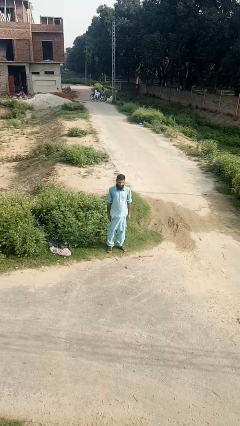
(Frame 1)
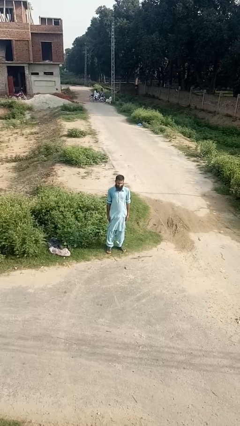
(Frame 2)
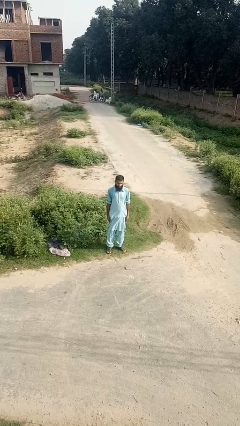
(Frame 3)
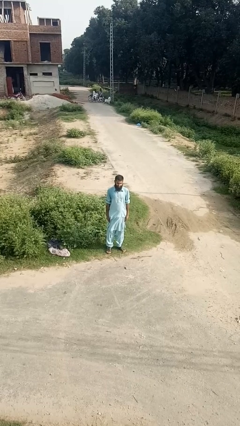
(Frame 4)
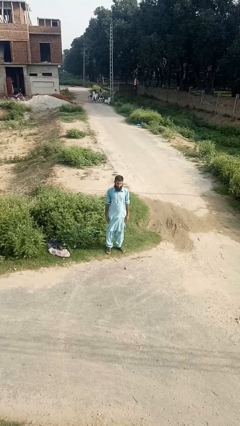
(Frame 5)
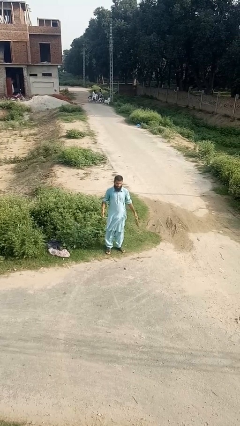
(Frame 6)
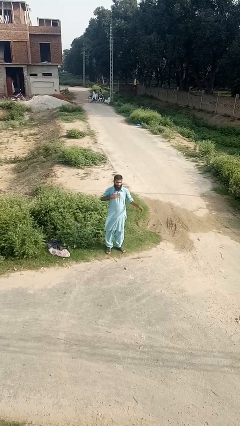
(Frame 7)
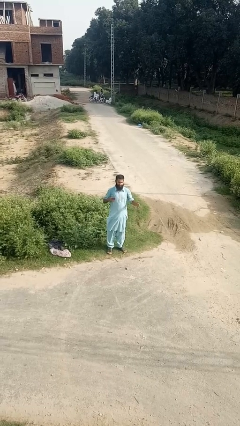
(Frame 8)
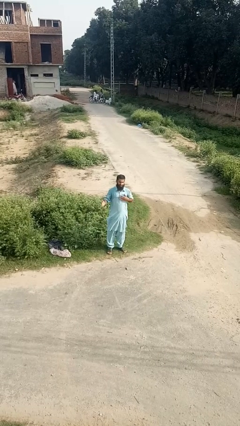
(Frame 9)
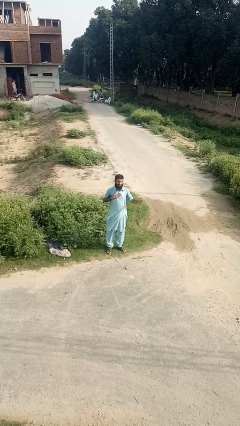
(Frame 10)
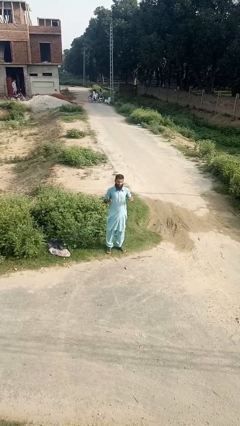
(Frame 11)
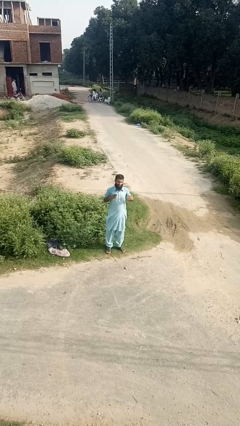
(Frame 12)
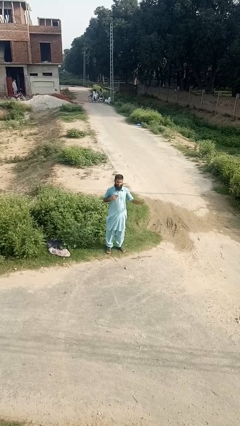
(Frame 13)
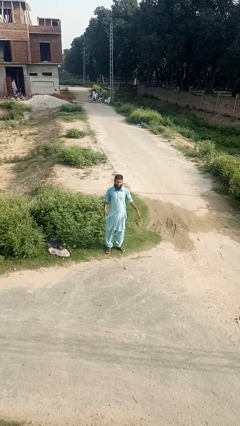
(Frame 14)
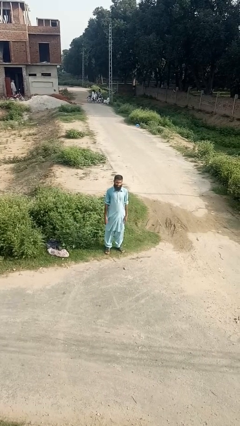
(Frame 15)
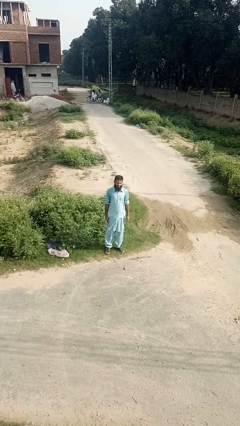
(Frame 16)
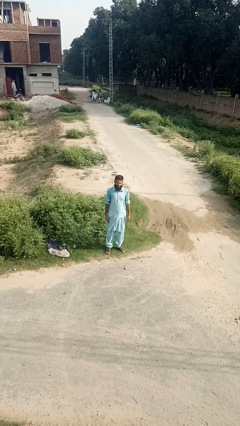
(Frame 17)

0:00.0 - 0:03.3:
person drums on chest

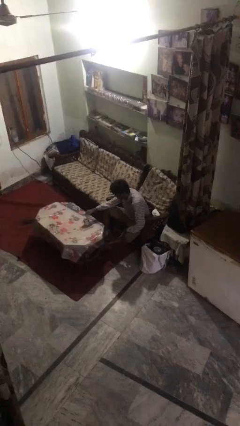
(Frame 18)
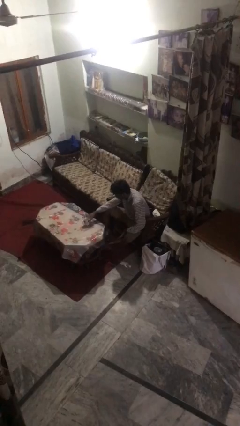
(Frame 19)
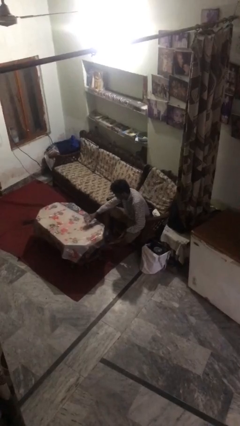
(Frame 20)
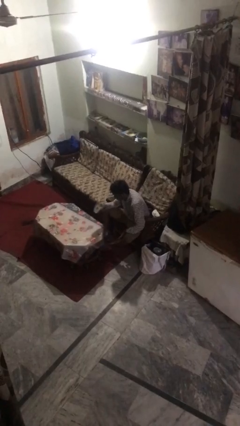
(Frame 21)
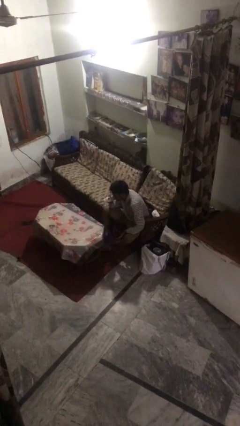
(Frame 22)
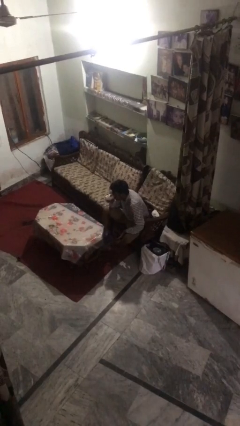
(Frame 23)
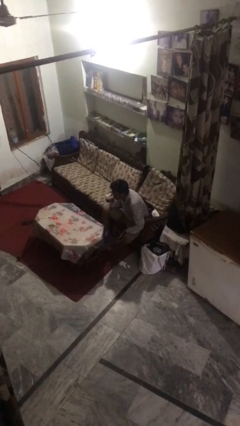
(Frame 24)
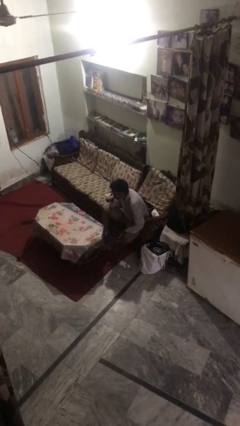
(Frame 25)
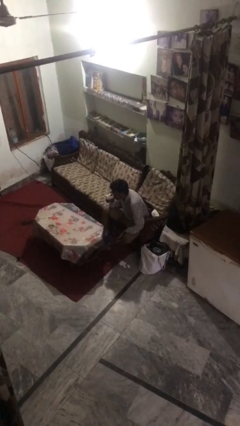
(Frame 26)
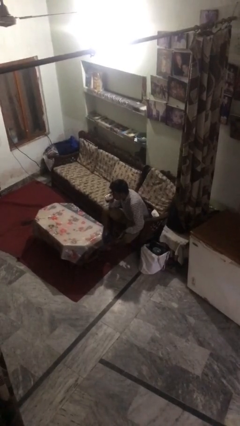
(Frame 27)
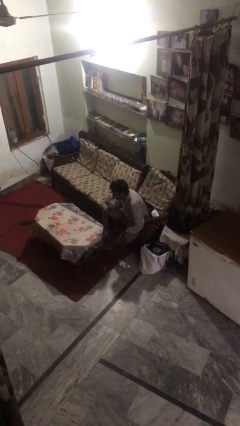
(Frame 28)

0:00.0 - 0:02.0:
person drinks from mug

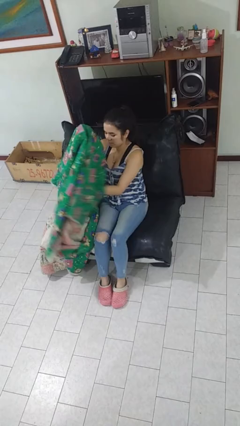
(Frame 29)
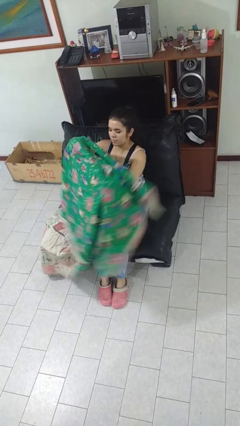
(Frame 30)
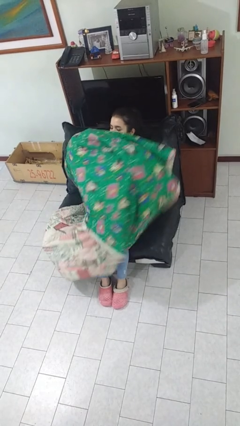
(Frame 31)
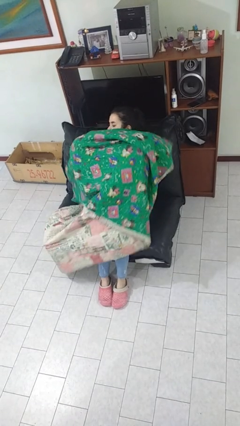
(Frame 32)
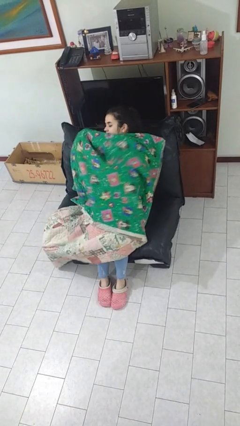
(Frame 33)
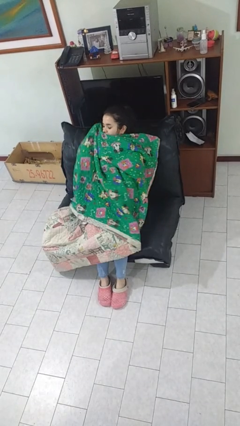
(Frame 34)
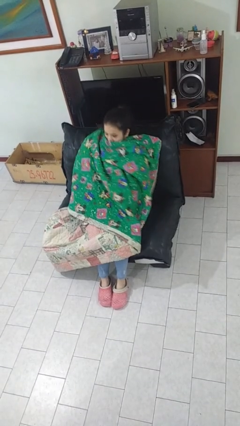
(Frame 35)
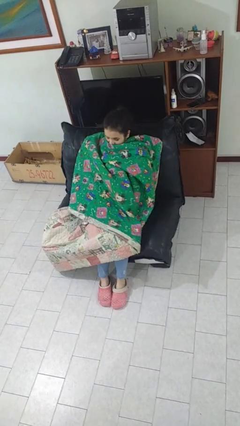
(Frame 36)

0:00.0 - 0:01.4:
person covers with blanket

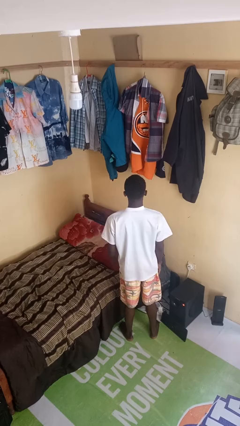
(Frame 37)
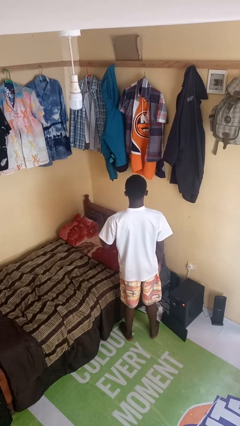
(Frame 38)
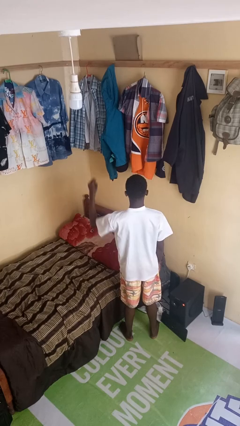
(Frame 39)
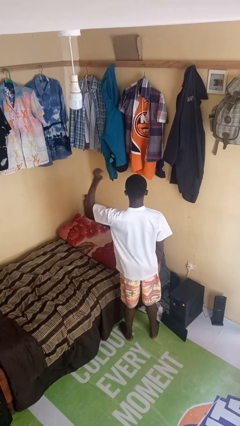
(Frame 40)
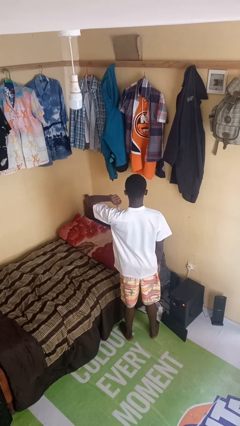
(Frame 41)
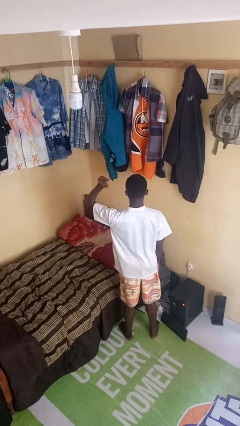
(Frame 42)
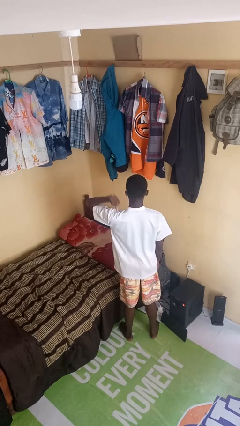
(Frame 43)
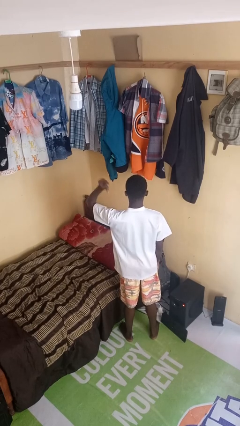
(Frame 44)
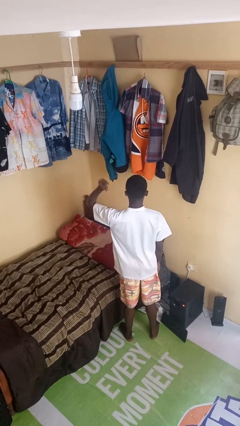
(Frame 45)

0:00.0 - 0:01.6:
person gestures behind me

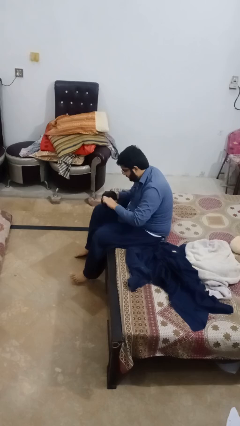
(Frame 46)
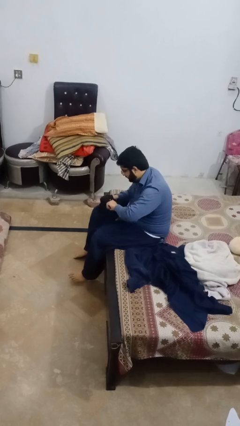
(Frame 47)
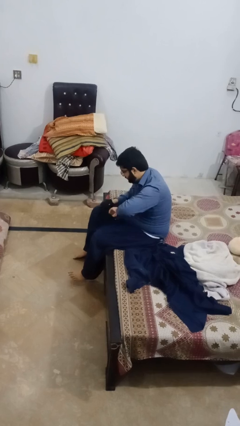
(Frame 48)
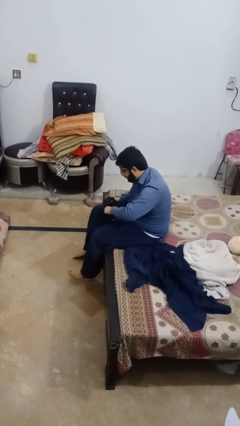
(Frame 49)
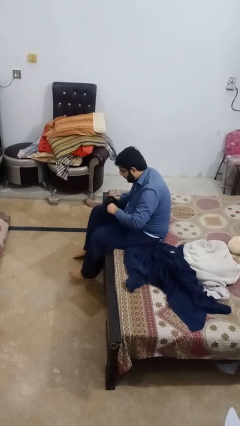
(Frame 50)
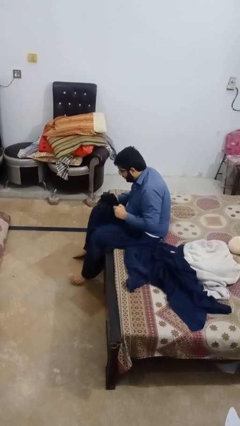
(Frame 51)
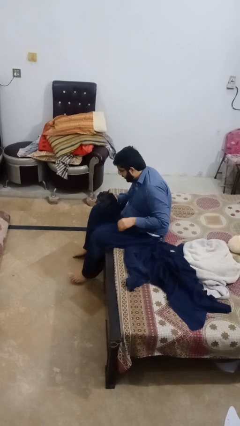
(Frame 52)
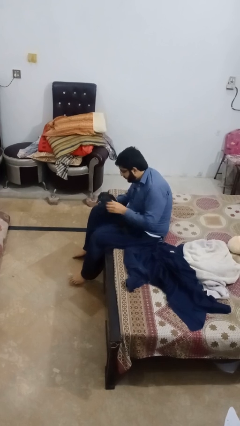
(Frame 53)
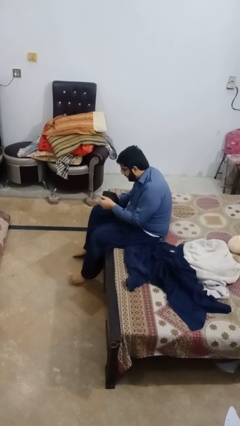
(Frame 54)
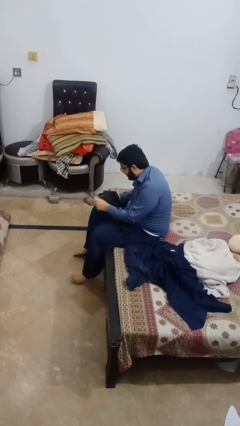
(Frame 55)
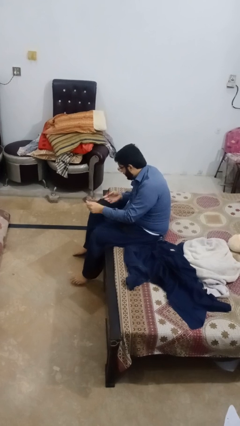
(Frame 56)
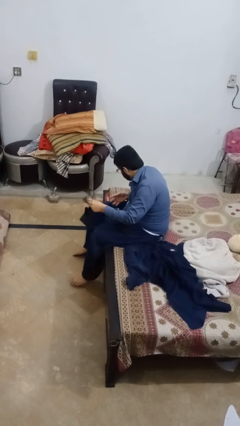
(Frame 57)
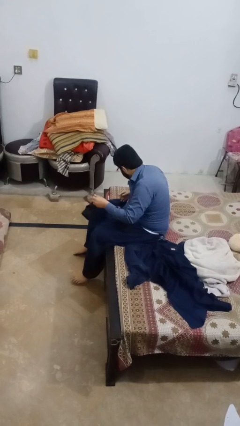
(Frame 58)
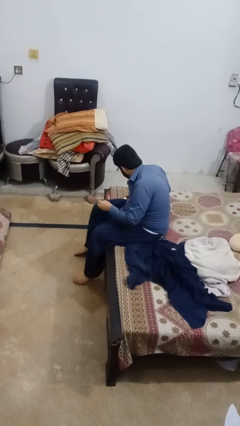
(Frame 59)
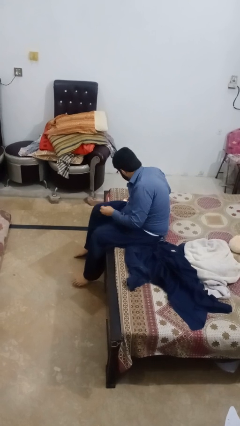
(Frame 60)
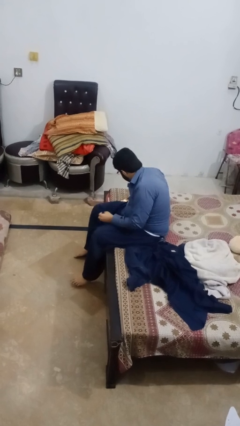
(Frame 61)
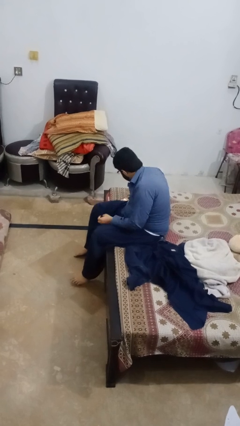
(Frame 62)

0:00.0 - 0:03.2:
person takes off gloves

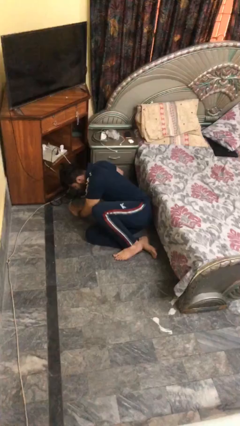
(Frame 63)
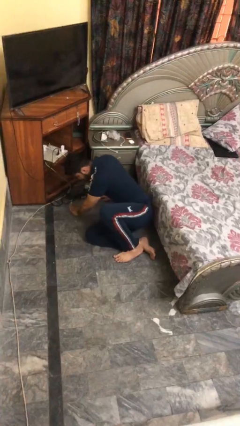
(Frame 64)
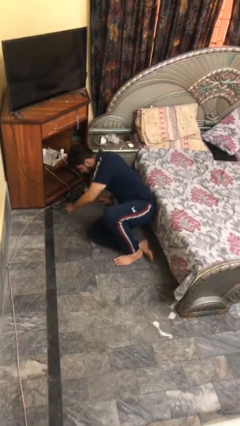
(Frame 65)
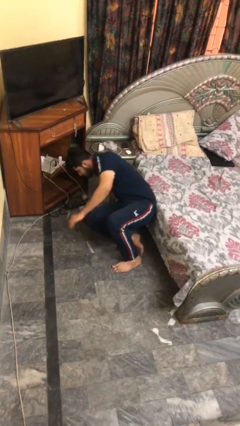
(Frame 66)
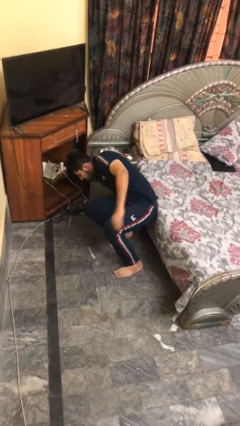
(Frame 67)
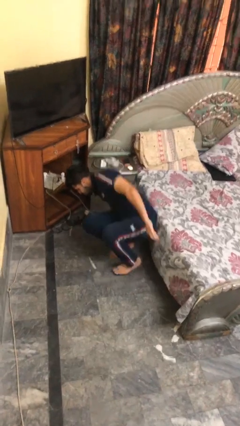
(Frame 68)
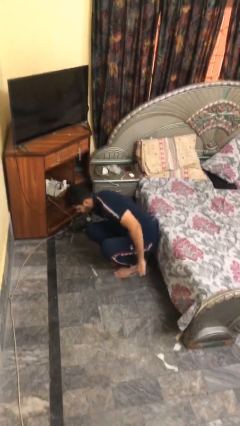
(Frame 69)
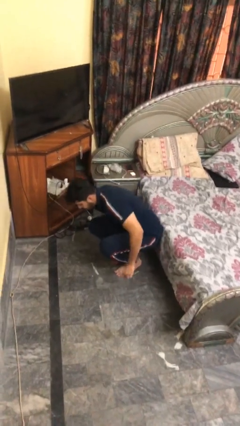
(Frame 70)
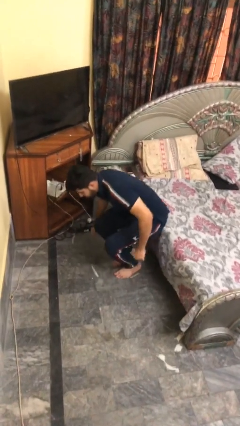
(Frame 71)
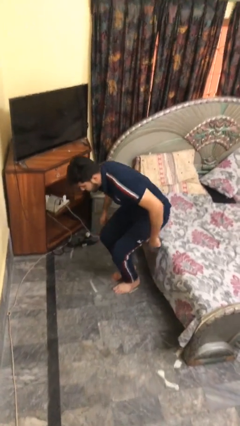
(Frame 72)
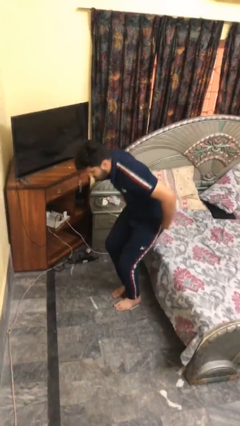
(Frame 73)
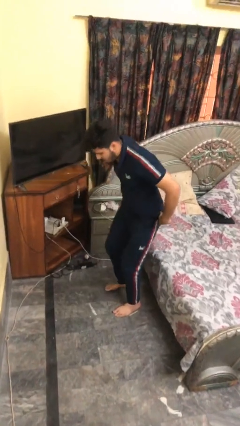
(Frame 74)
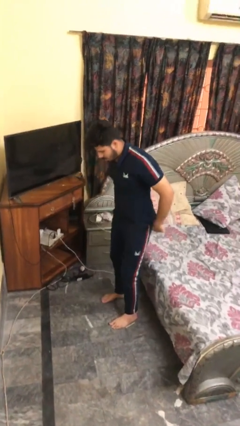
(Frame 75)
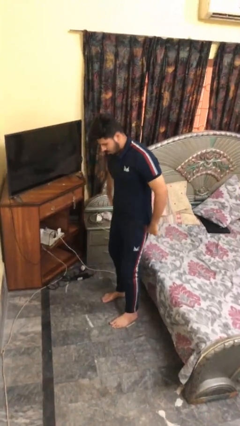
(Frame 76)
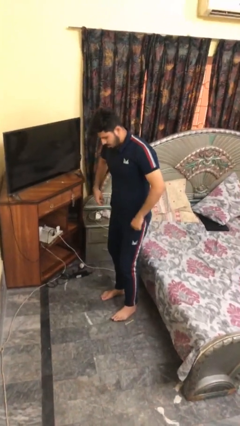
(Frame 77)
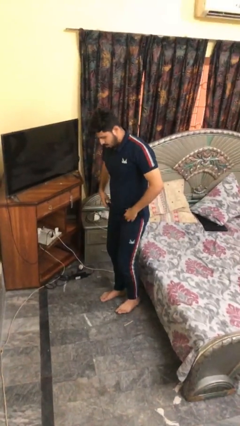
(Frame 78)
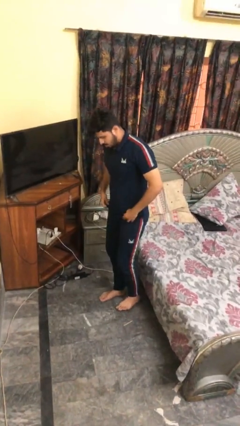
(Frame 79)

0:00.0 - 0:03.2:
person stands up from floor

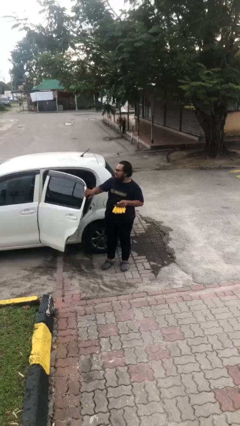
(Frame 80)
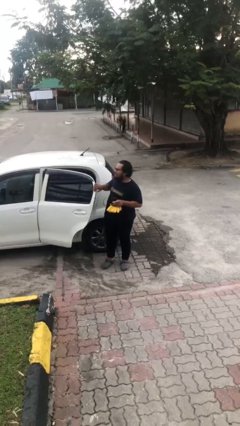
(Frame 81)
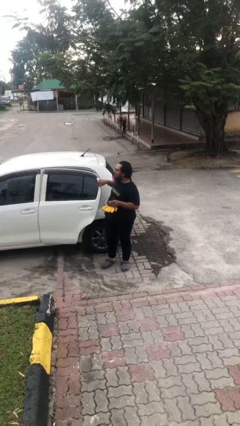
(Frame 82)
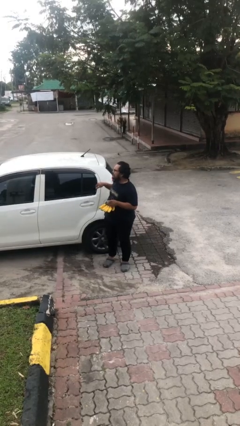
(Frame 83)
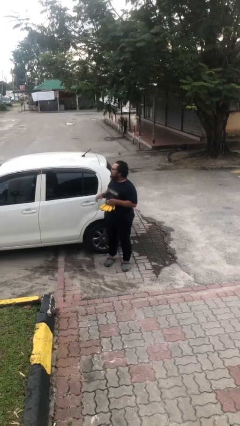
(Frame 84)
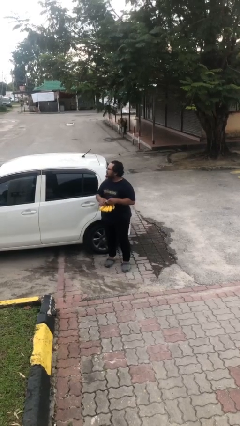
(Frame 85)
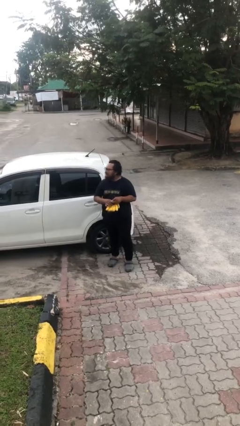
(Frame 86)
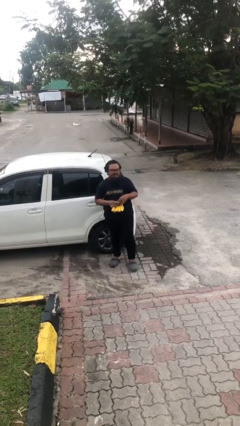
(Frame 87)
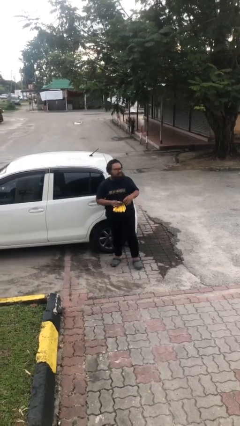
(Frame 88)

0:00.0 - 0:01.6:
person closes car door

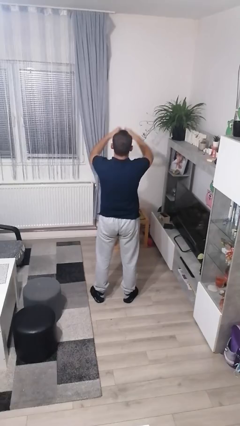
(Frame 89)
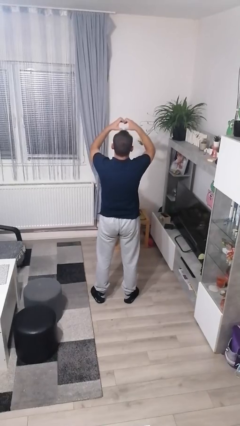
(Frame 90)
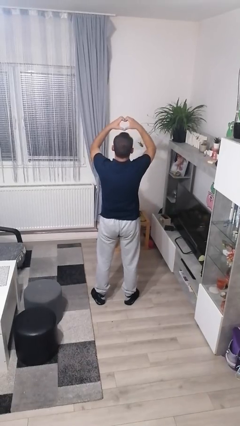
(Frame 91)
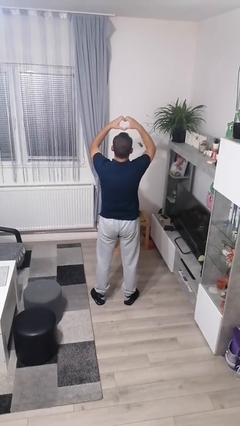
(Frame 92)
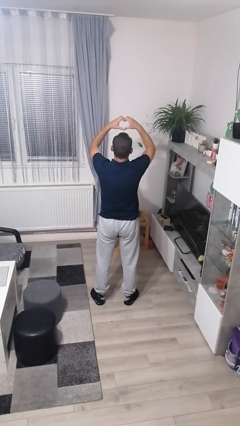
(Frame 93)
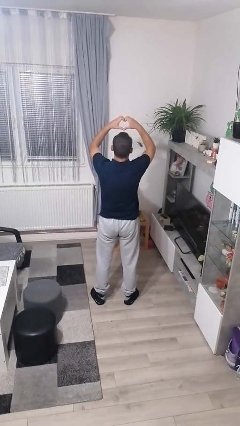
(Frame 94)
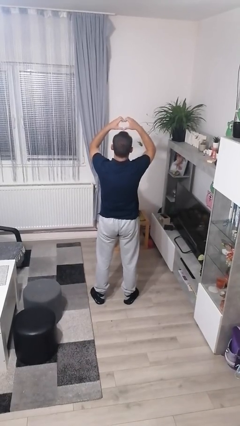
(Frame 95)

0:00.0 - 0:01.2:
person gestures heart
